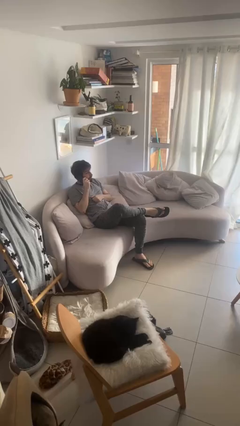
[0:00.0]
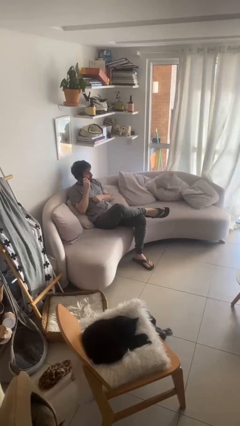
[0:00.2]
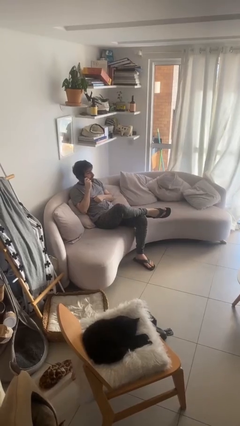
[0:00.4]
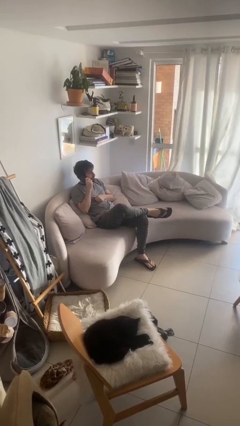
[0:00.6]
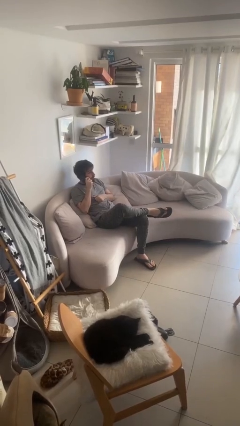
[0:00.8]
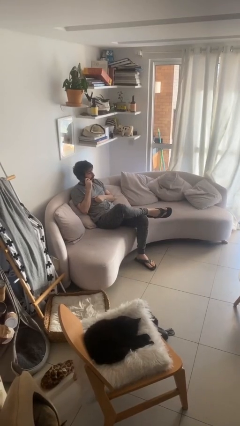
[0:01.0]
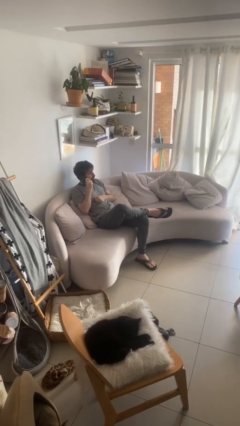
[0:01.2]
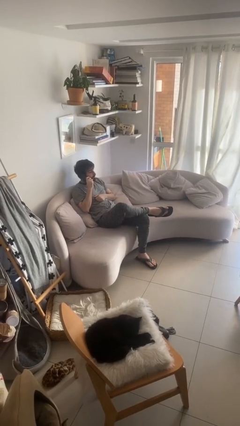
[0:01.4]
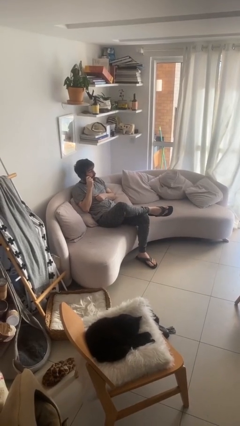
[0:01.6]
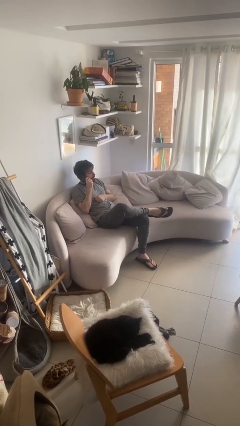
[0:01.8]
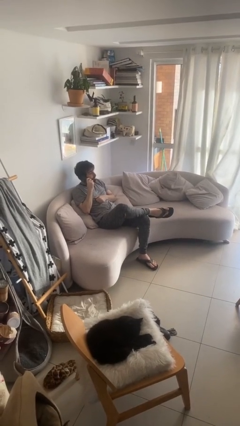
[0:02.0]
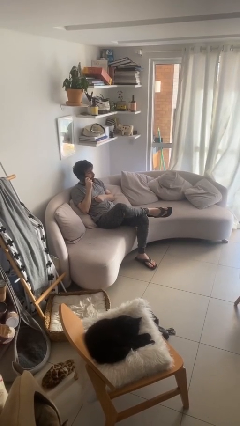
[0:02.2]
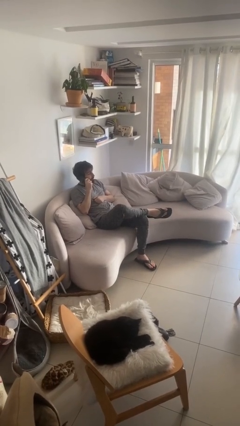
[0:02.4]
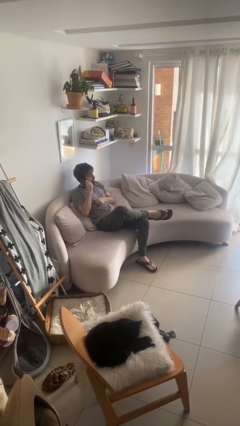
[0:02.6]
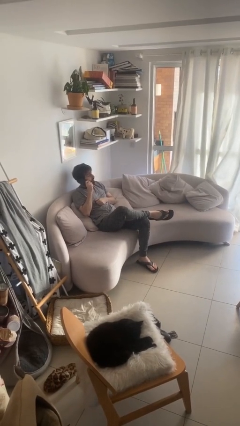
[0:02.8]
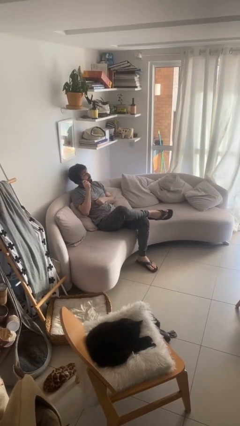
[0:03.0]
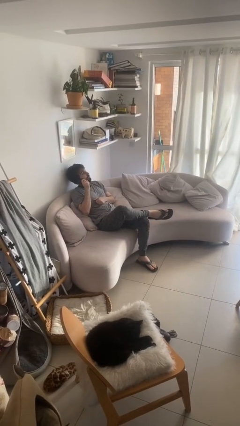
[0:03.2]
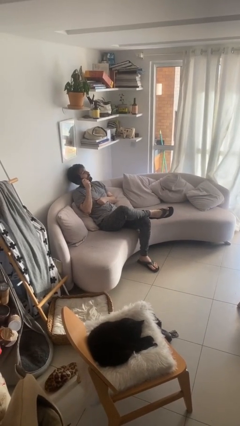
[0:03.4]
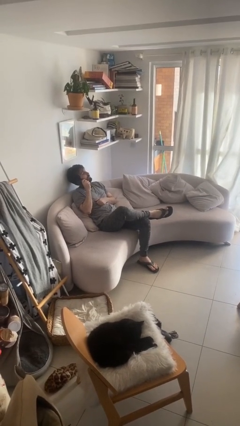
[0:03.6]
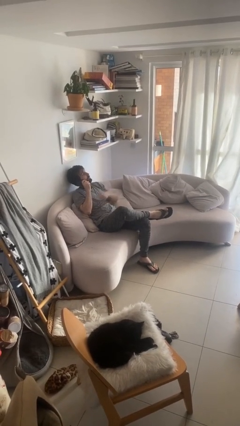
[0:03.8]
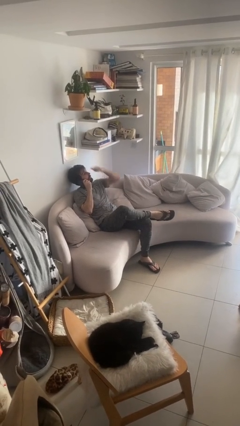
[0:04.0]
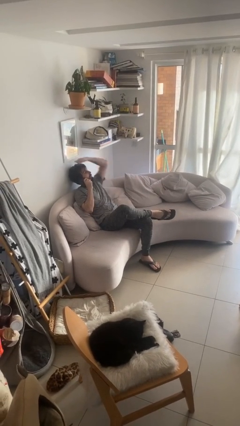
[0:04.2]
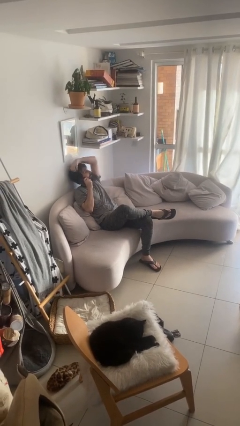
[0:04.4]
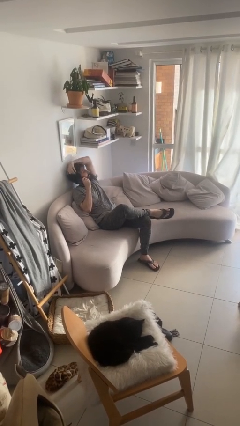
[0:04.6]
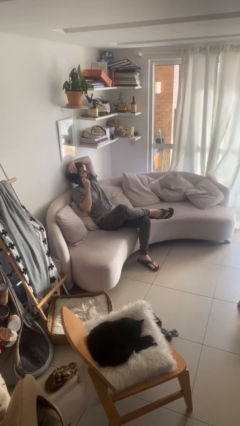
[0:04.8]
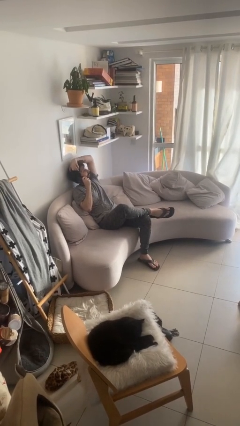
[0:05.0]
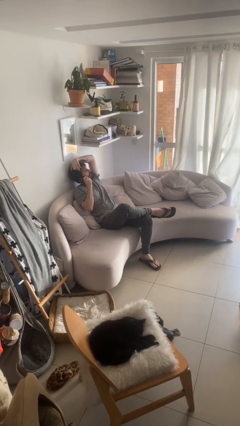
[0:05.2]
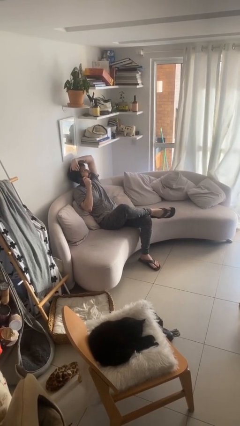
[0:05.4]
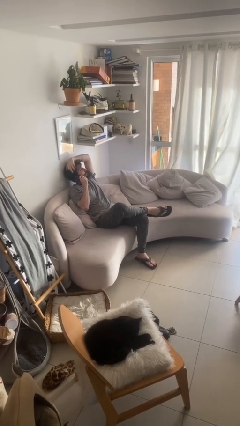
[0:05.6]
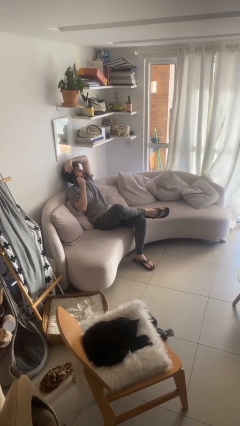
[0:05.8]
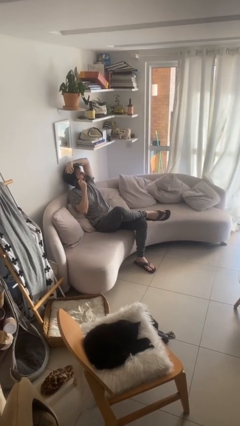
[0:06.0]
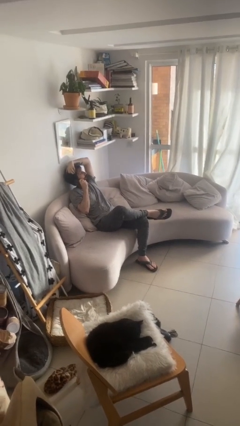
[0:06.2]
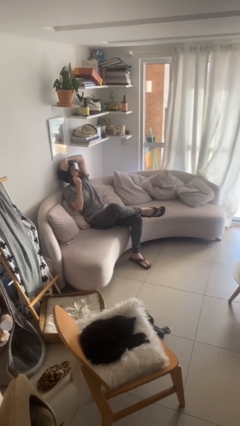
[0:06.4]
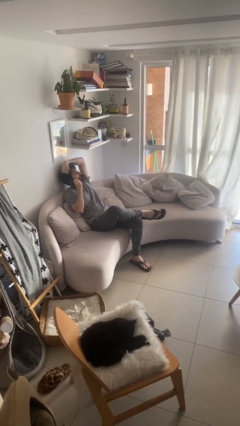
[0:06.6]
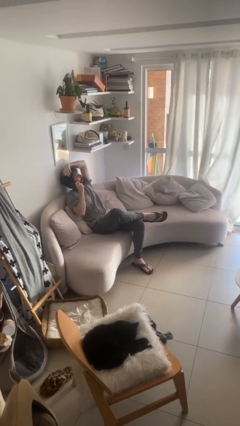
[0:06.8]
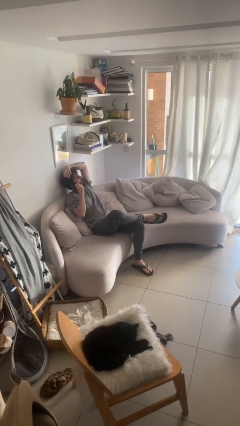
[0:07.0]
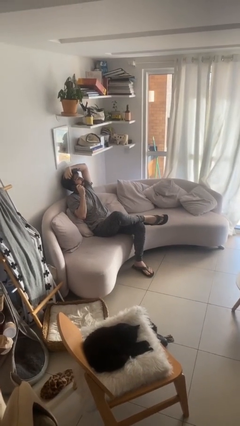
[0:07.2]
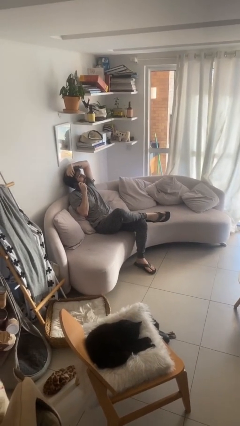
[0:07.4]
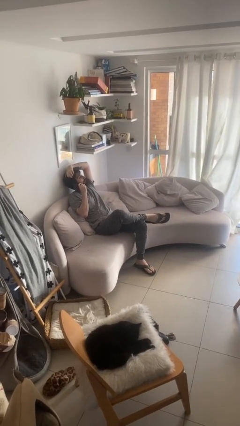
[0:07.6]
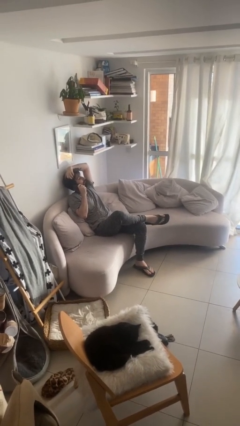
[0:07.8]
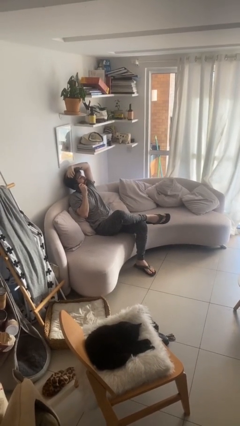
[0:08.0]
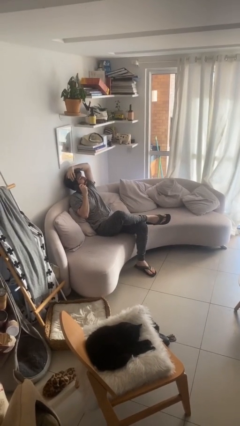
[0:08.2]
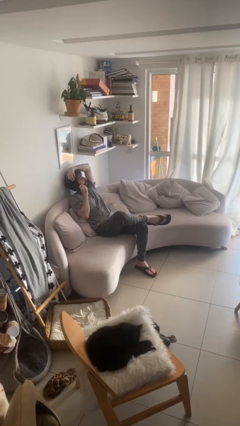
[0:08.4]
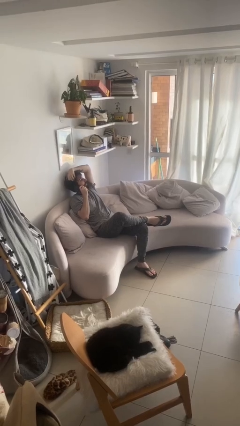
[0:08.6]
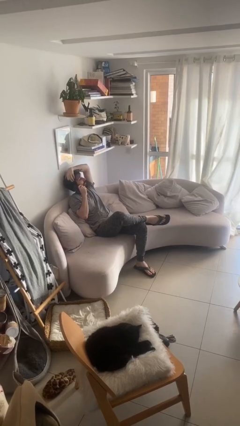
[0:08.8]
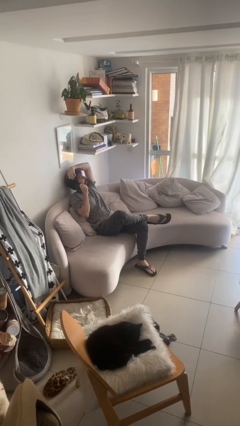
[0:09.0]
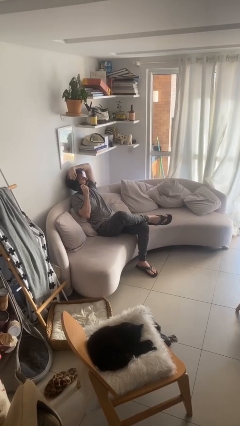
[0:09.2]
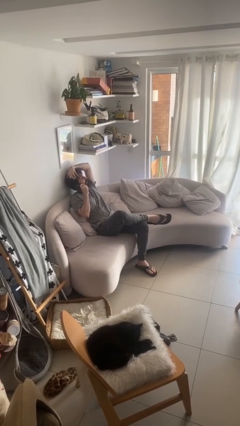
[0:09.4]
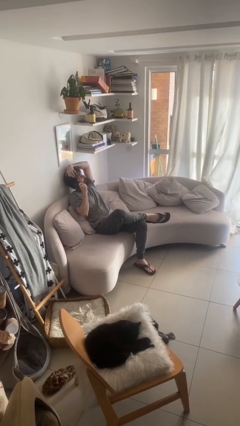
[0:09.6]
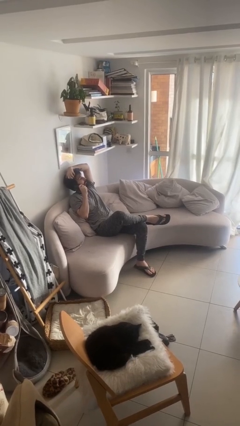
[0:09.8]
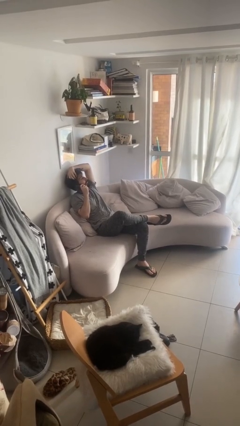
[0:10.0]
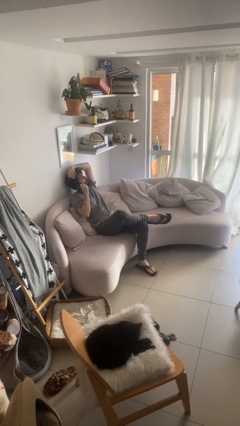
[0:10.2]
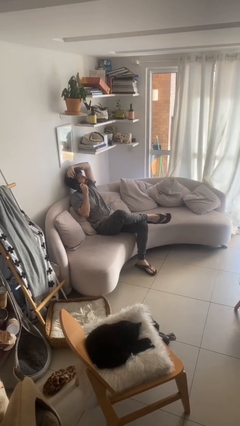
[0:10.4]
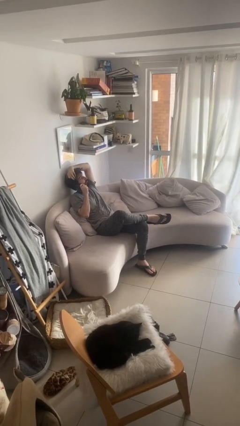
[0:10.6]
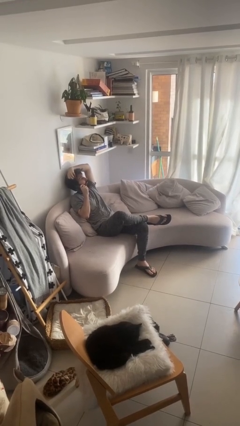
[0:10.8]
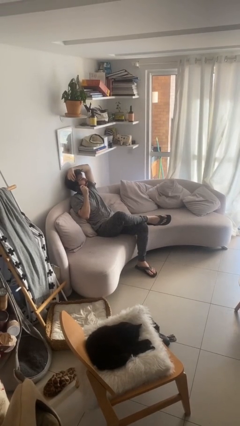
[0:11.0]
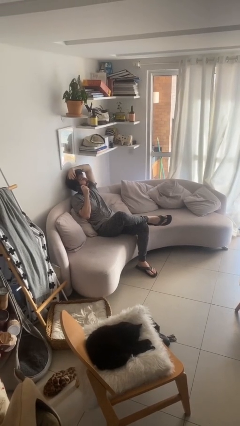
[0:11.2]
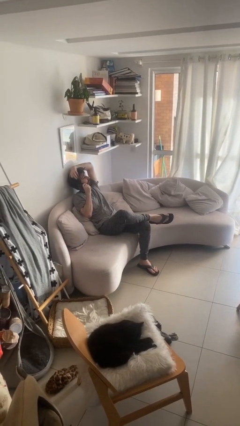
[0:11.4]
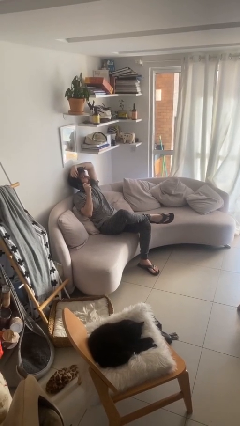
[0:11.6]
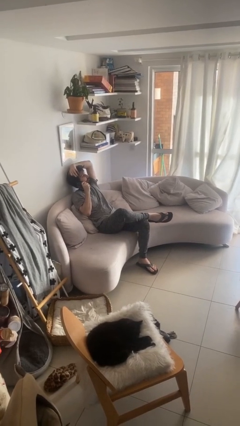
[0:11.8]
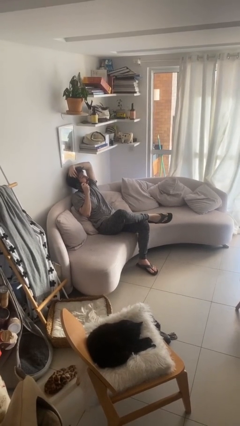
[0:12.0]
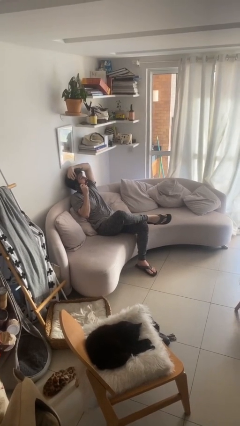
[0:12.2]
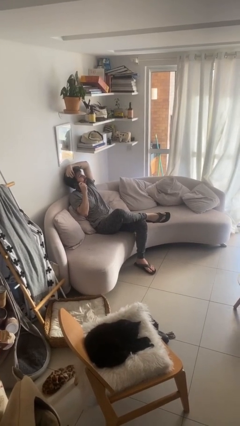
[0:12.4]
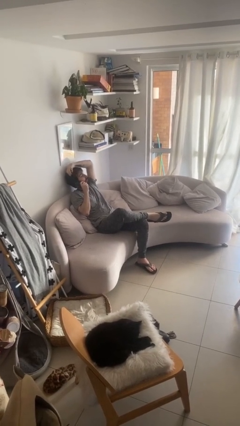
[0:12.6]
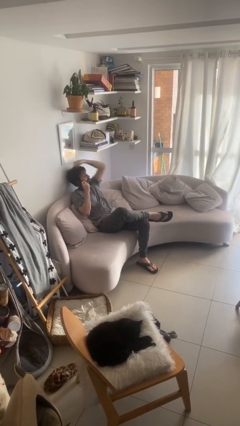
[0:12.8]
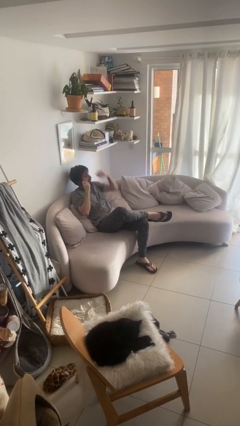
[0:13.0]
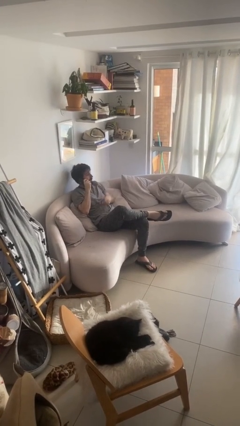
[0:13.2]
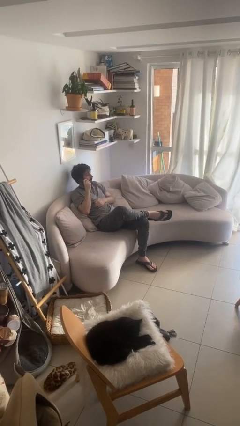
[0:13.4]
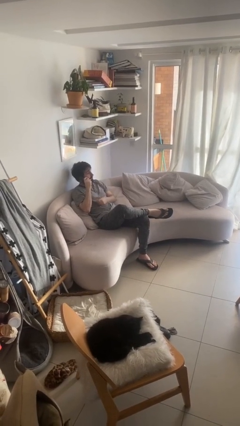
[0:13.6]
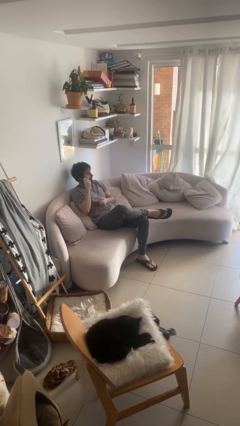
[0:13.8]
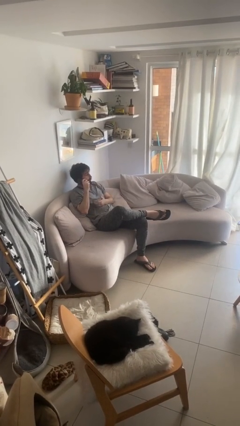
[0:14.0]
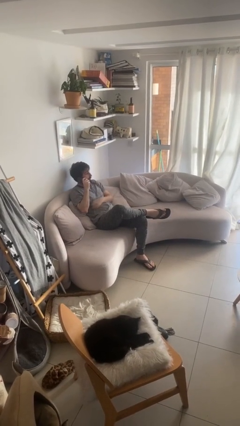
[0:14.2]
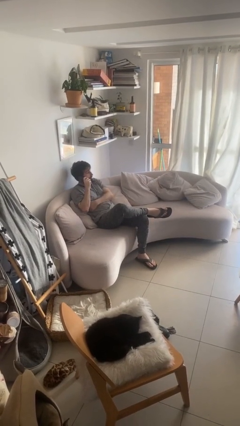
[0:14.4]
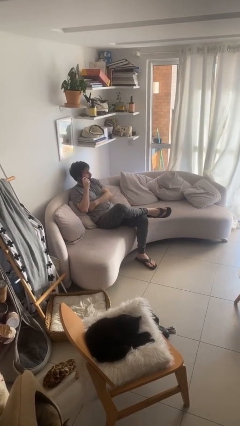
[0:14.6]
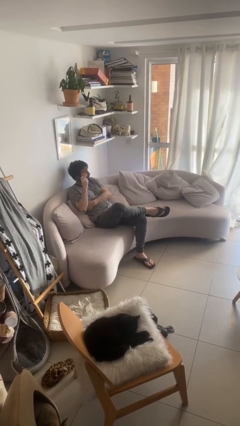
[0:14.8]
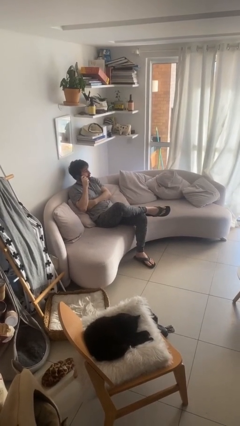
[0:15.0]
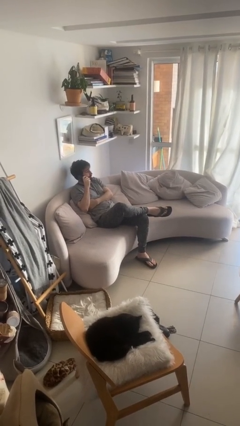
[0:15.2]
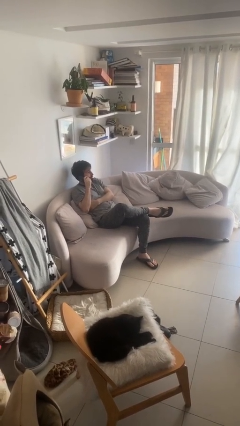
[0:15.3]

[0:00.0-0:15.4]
person talks on phone

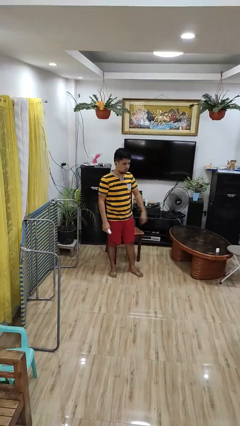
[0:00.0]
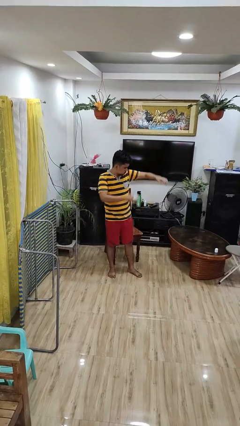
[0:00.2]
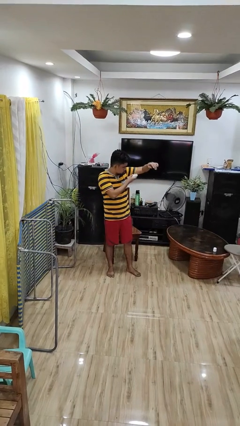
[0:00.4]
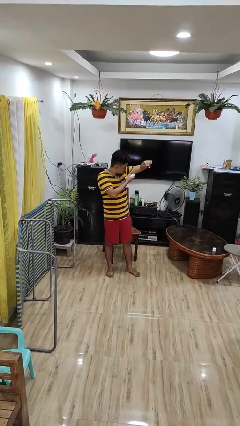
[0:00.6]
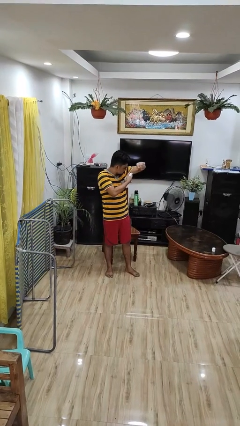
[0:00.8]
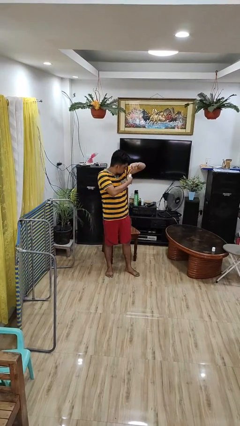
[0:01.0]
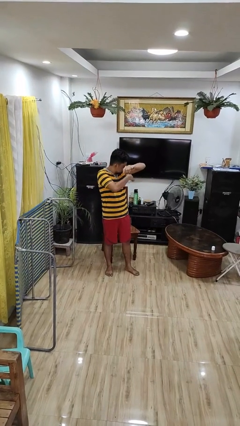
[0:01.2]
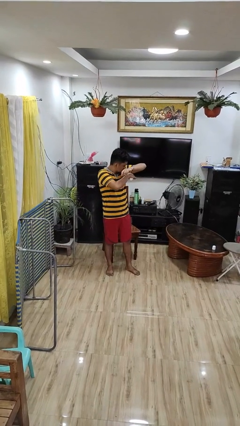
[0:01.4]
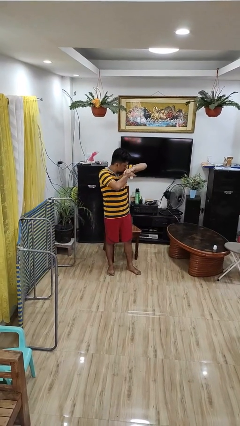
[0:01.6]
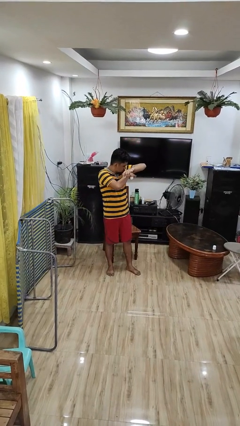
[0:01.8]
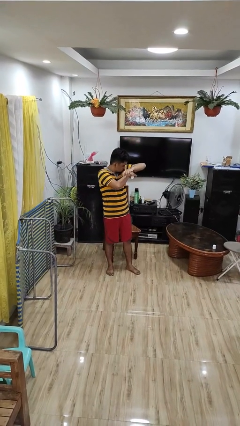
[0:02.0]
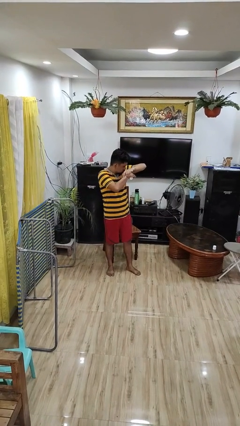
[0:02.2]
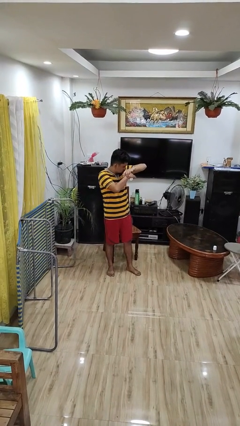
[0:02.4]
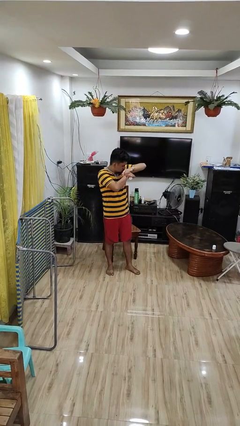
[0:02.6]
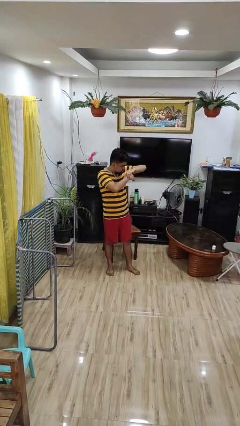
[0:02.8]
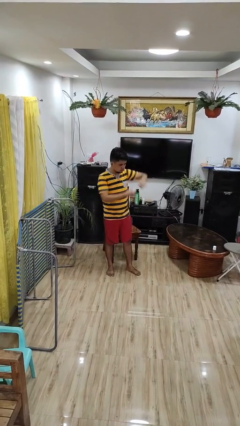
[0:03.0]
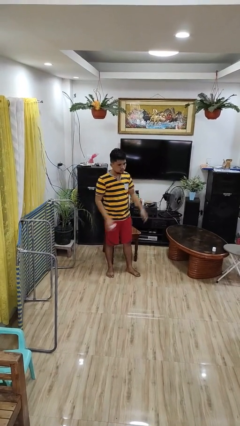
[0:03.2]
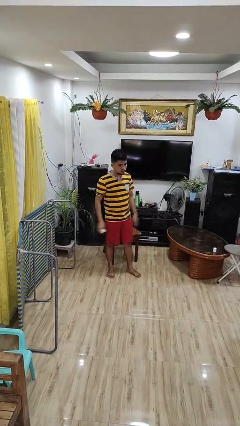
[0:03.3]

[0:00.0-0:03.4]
person applies deodorant
